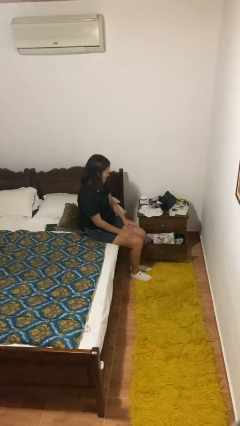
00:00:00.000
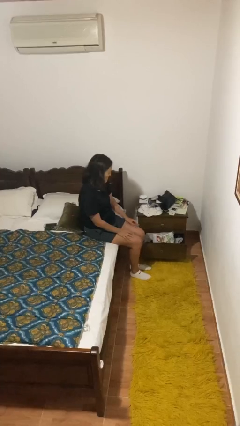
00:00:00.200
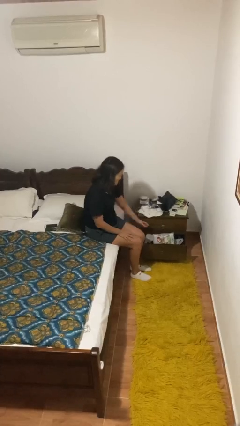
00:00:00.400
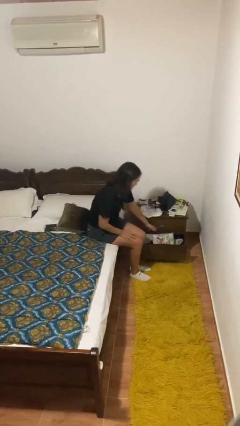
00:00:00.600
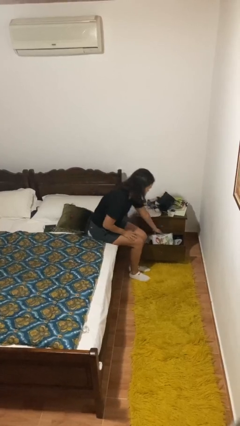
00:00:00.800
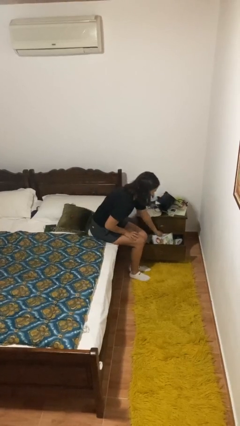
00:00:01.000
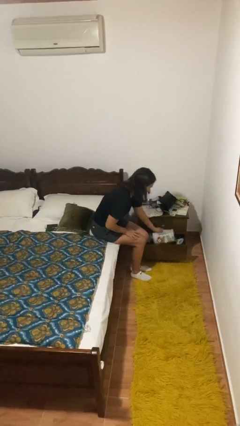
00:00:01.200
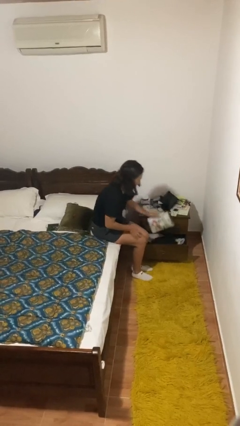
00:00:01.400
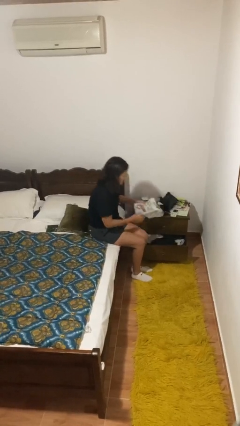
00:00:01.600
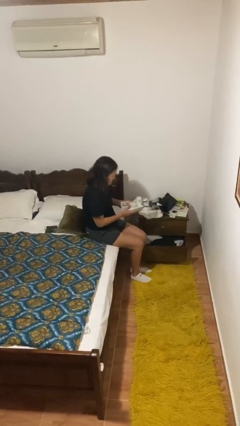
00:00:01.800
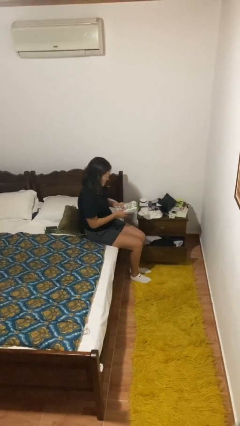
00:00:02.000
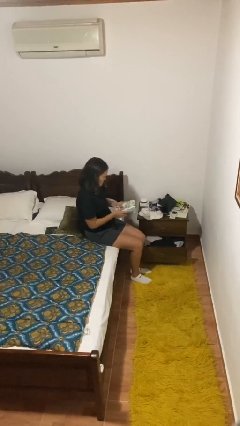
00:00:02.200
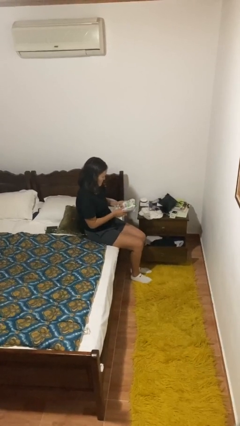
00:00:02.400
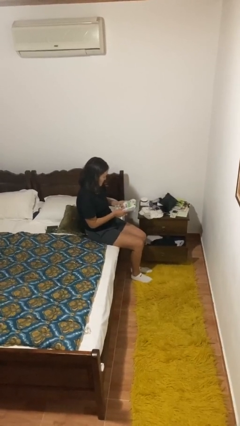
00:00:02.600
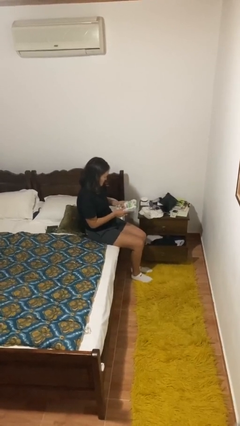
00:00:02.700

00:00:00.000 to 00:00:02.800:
person picks up object from cabinet

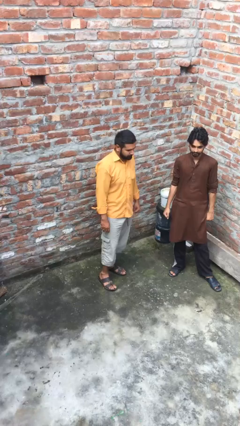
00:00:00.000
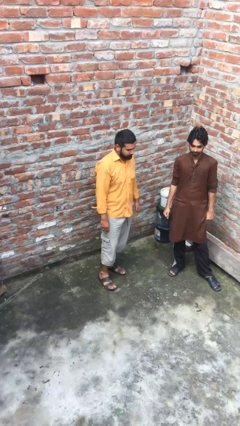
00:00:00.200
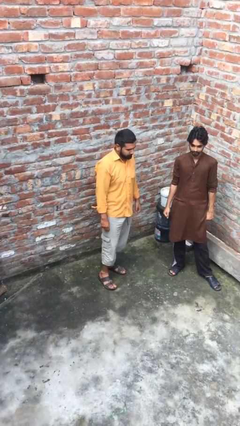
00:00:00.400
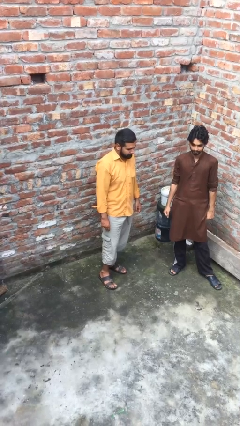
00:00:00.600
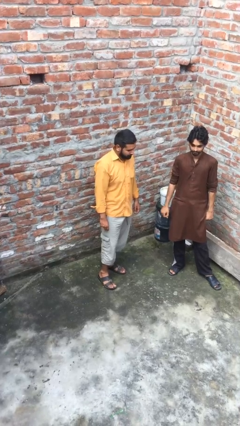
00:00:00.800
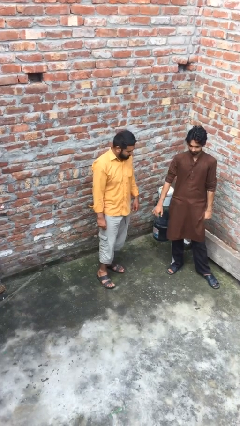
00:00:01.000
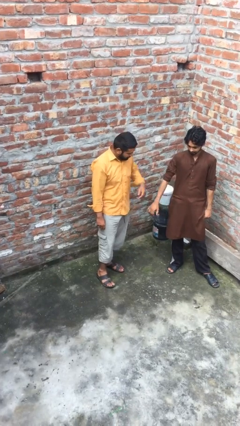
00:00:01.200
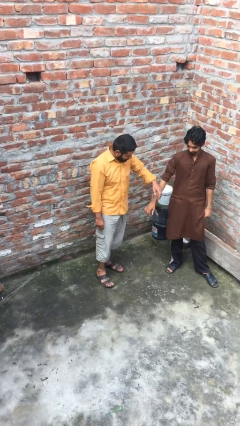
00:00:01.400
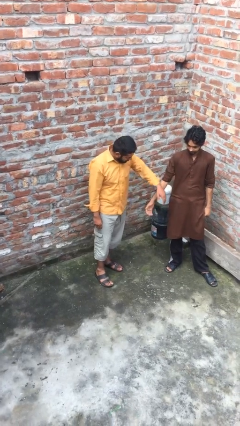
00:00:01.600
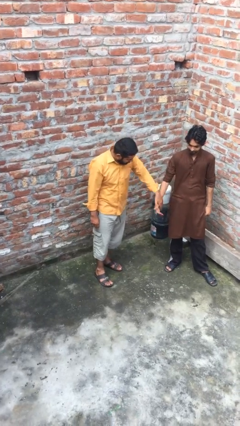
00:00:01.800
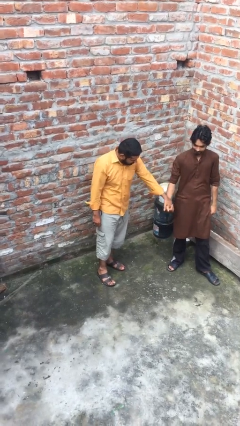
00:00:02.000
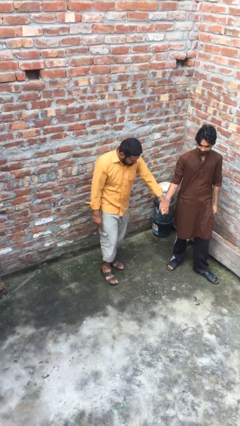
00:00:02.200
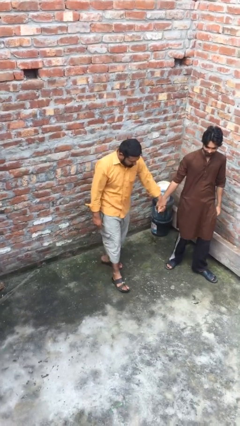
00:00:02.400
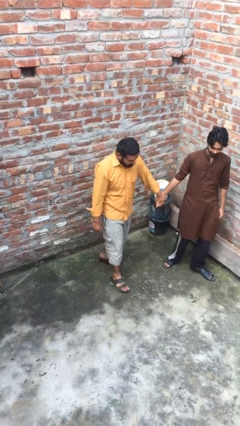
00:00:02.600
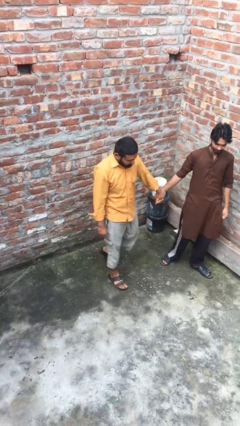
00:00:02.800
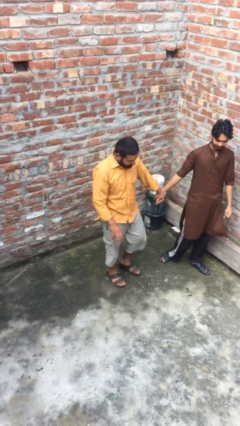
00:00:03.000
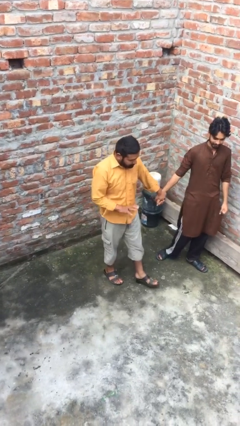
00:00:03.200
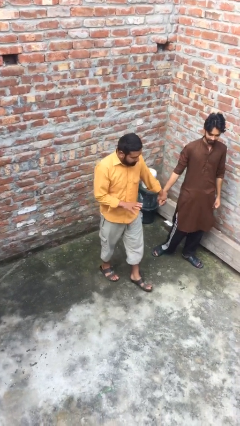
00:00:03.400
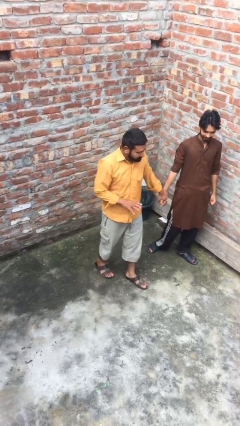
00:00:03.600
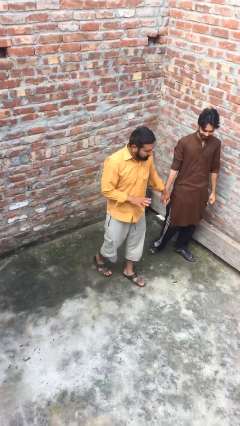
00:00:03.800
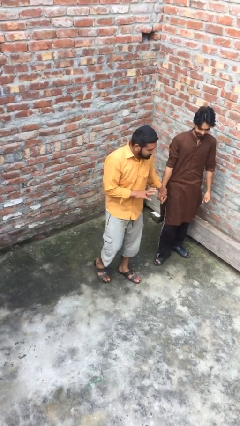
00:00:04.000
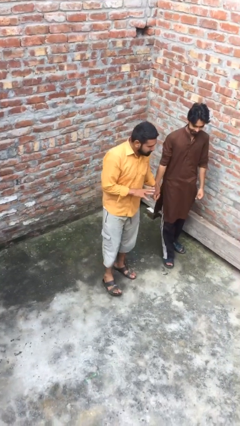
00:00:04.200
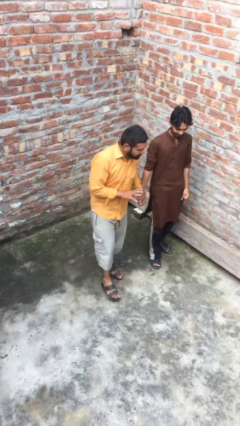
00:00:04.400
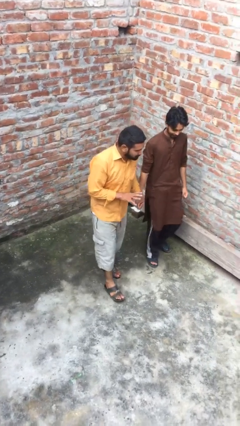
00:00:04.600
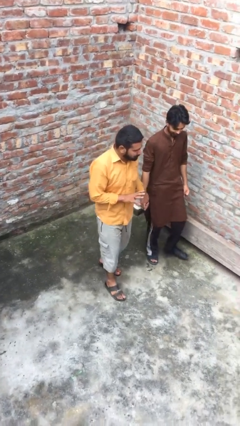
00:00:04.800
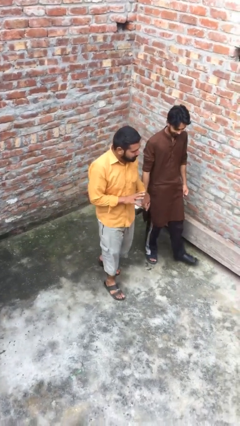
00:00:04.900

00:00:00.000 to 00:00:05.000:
person holds hand

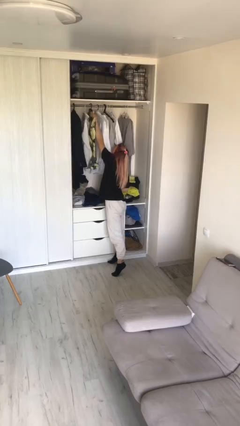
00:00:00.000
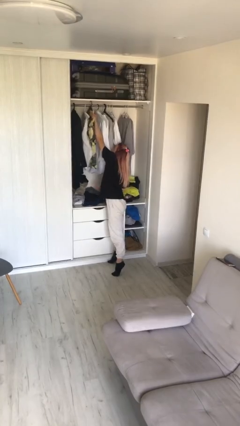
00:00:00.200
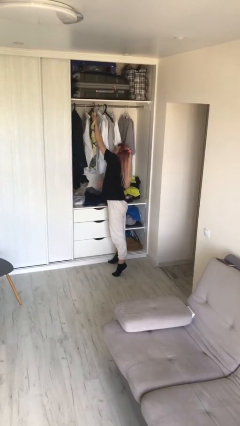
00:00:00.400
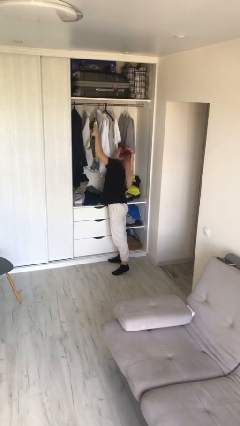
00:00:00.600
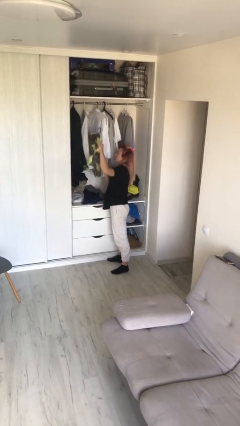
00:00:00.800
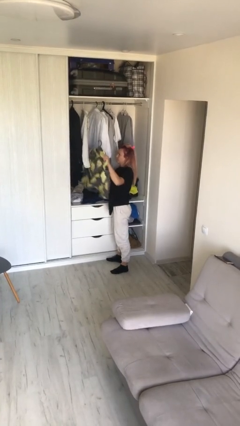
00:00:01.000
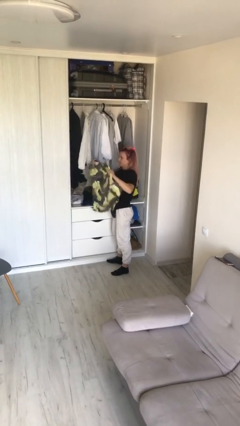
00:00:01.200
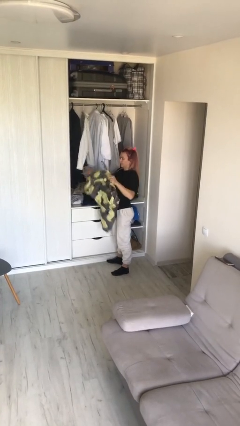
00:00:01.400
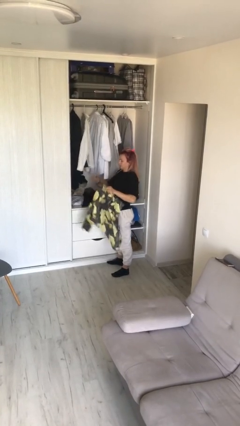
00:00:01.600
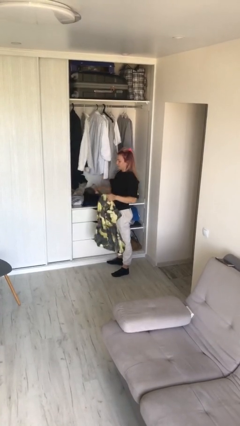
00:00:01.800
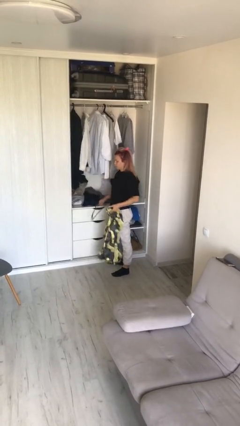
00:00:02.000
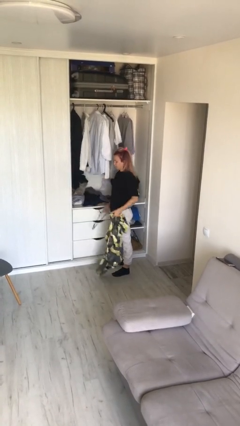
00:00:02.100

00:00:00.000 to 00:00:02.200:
person takes clothes from closet

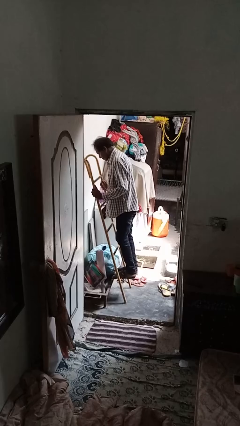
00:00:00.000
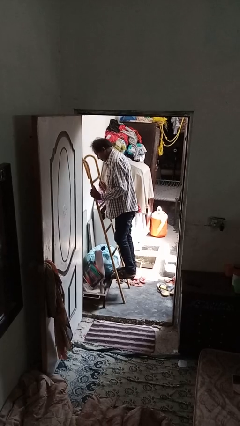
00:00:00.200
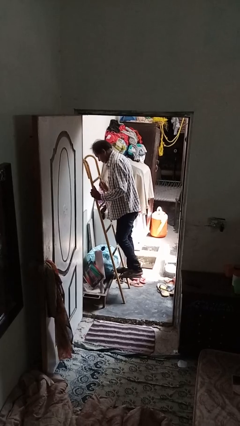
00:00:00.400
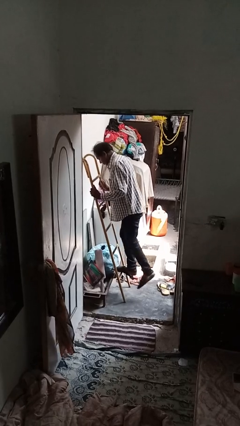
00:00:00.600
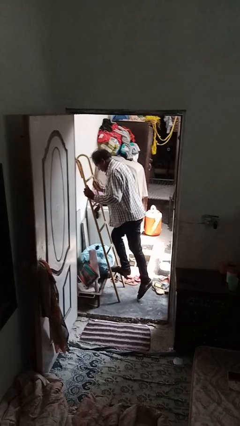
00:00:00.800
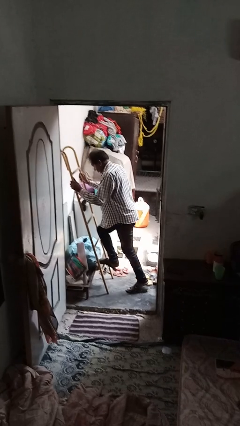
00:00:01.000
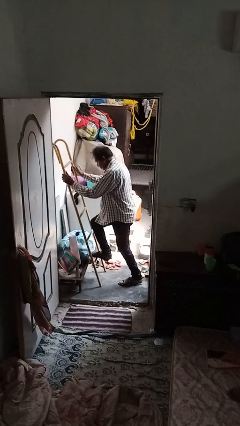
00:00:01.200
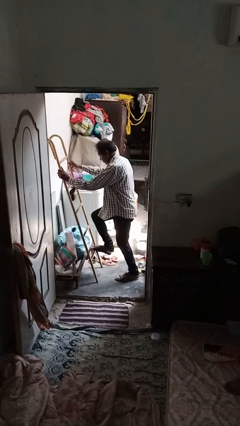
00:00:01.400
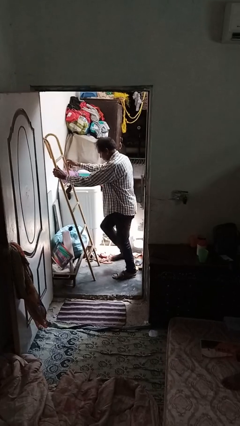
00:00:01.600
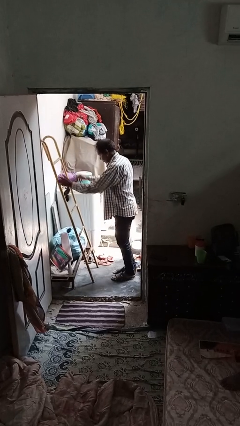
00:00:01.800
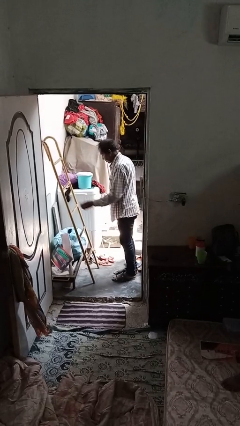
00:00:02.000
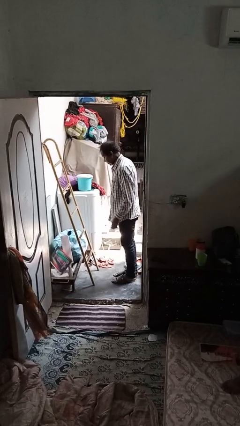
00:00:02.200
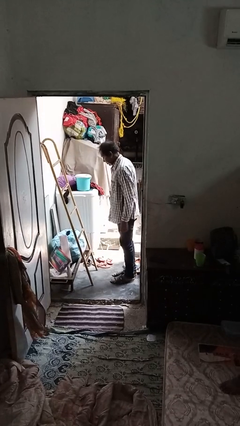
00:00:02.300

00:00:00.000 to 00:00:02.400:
person climbs down ladder

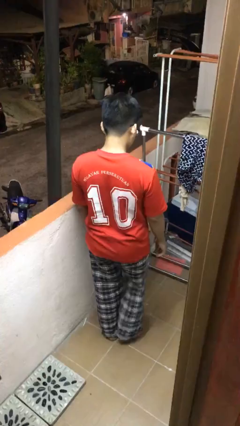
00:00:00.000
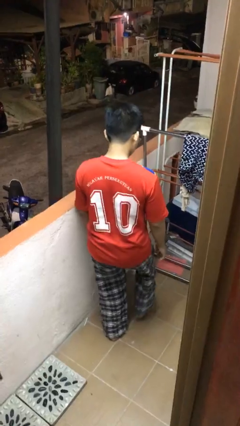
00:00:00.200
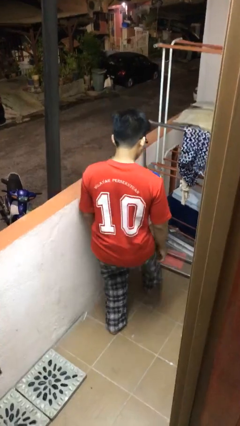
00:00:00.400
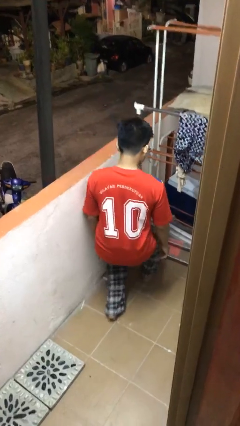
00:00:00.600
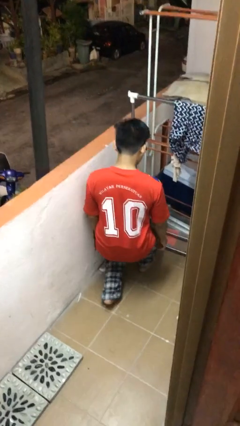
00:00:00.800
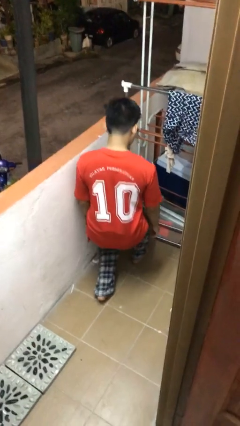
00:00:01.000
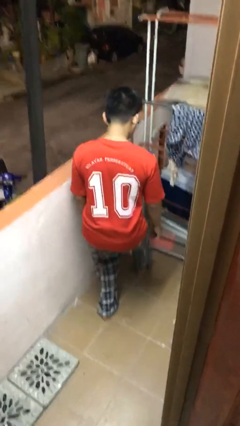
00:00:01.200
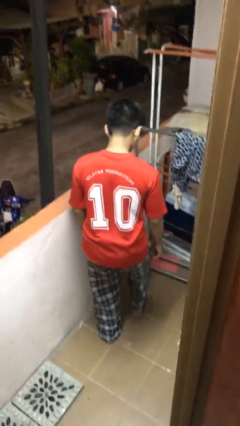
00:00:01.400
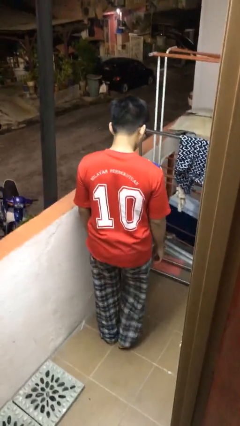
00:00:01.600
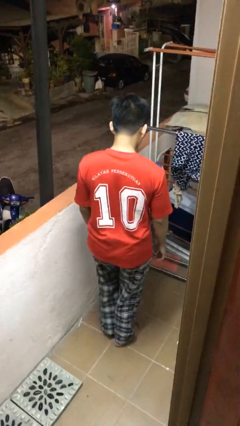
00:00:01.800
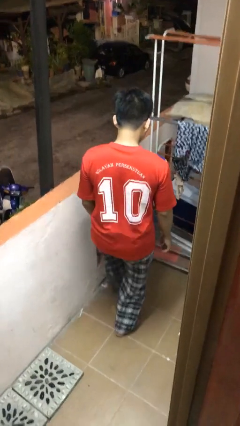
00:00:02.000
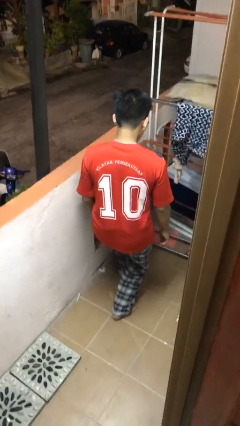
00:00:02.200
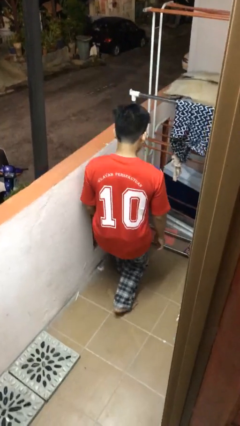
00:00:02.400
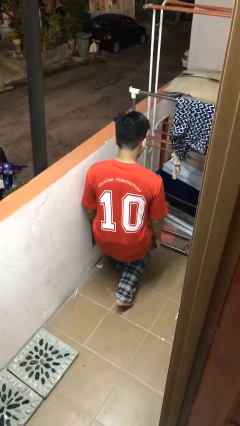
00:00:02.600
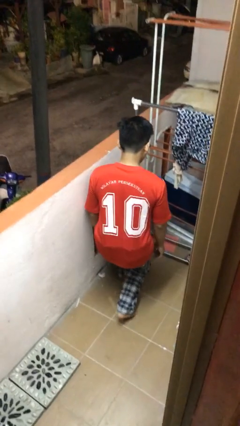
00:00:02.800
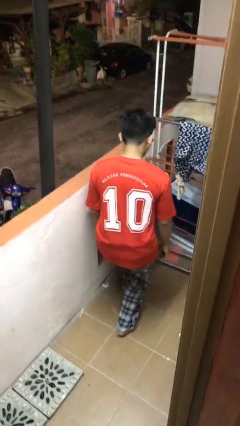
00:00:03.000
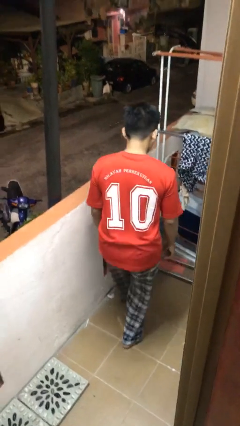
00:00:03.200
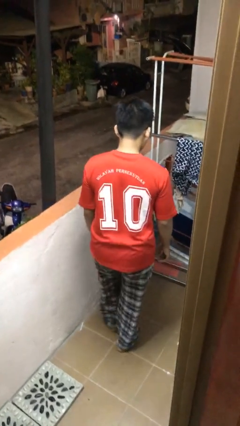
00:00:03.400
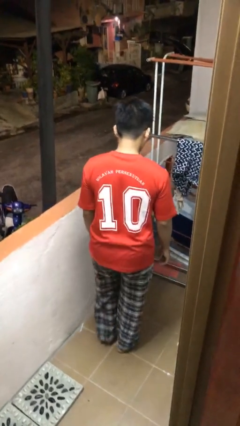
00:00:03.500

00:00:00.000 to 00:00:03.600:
person exercises with lunges

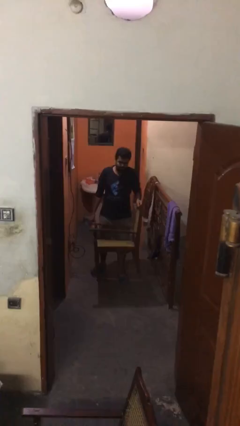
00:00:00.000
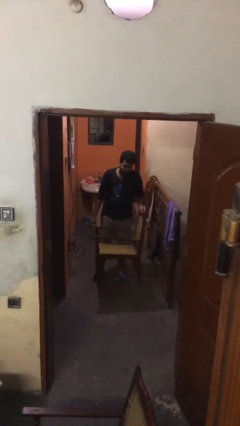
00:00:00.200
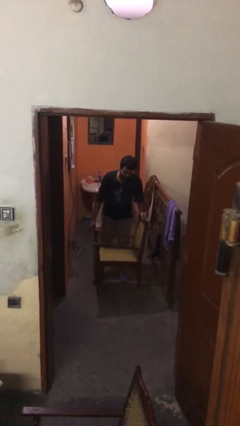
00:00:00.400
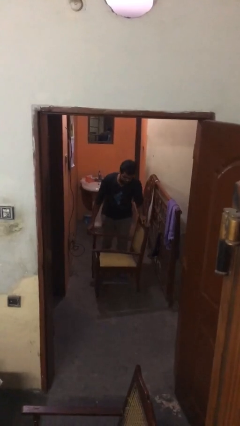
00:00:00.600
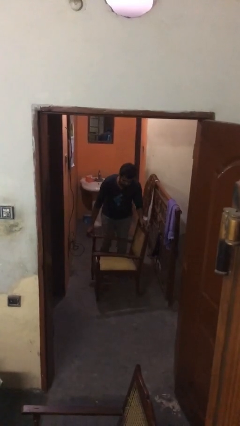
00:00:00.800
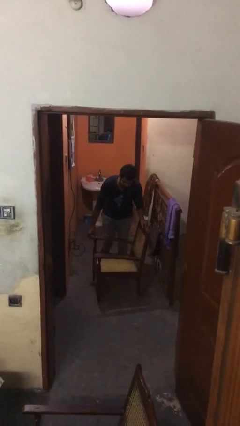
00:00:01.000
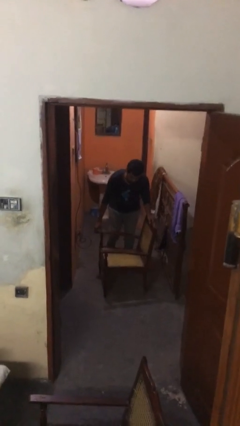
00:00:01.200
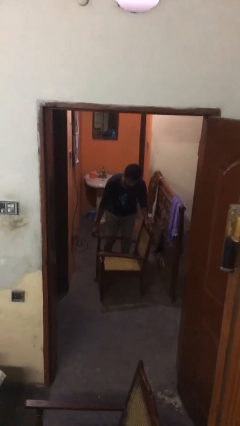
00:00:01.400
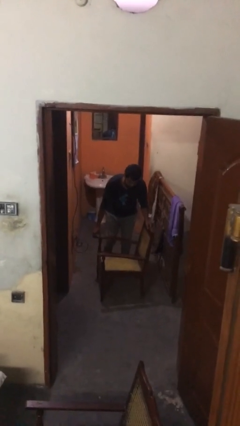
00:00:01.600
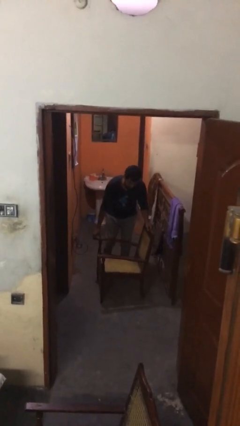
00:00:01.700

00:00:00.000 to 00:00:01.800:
person puts down object on floor
